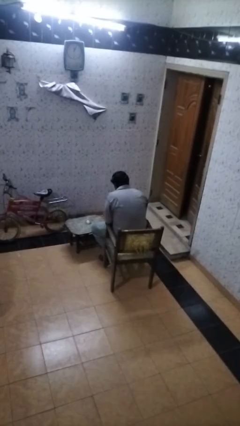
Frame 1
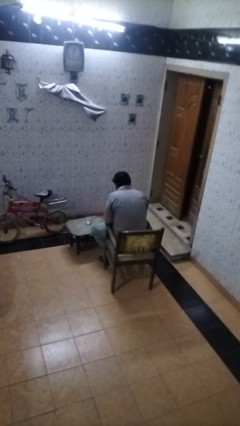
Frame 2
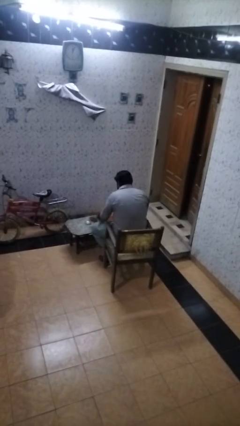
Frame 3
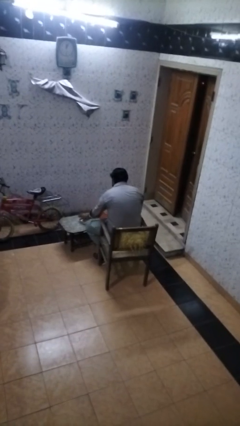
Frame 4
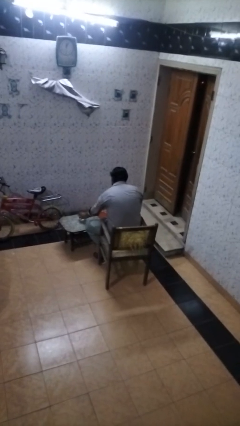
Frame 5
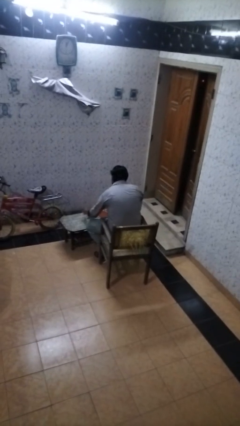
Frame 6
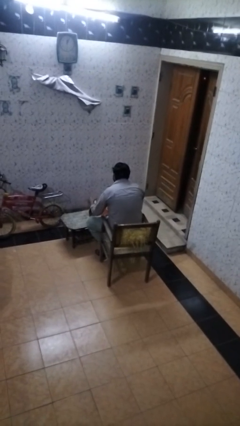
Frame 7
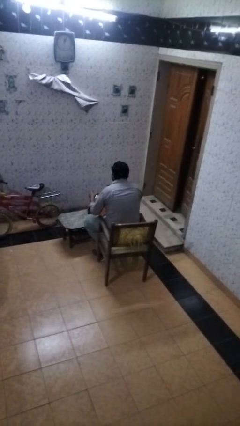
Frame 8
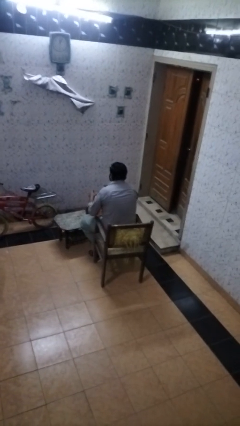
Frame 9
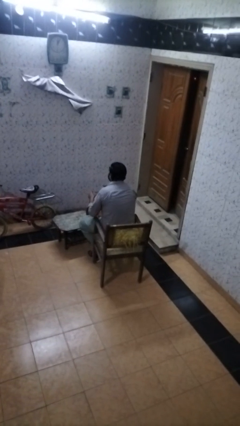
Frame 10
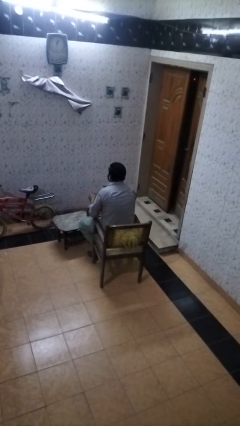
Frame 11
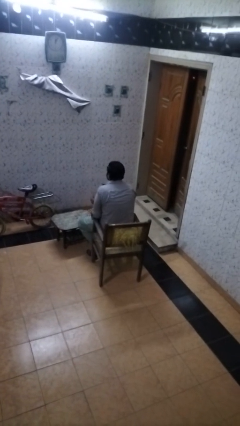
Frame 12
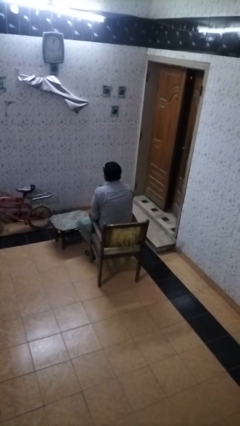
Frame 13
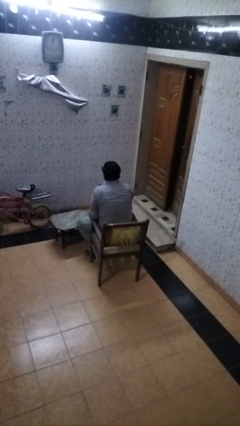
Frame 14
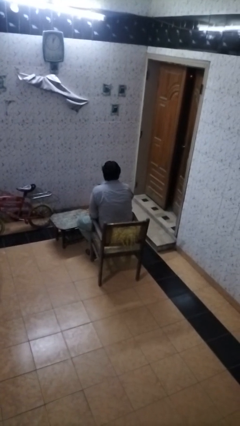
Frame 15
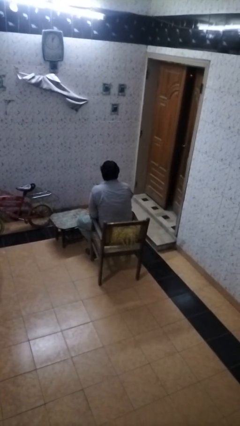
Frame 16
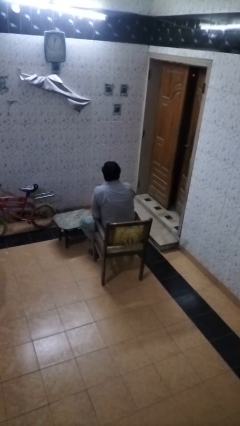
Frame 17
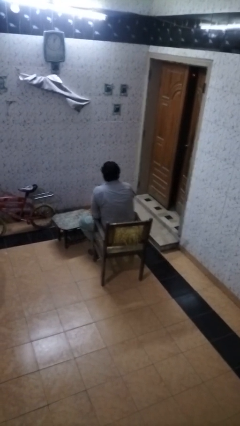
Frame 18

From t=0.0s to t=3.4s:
person picks up object from table

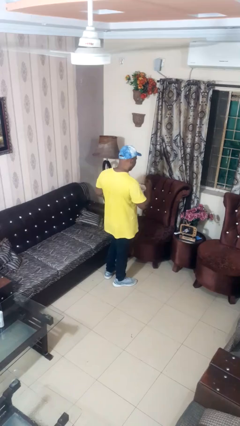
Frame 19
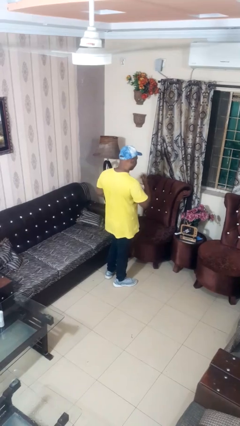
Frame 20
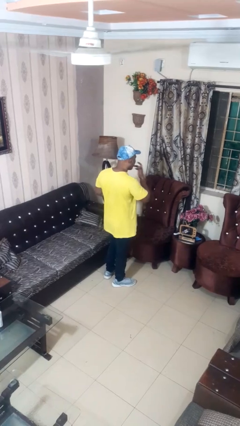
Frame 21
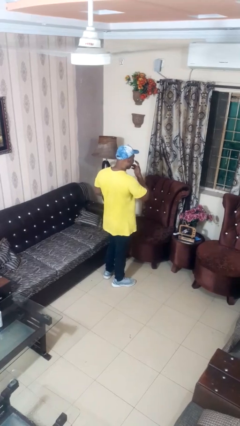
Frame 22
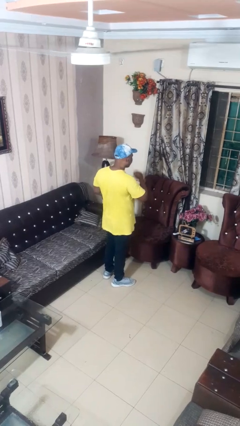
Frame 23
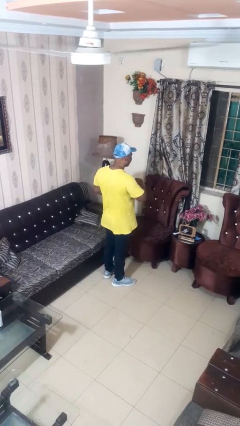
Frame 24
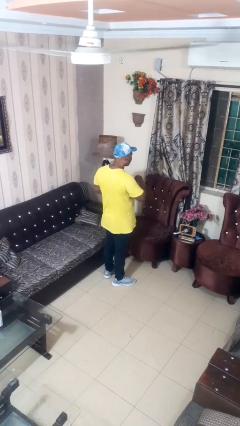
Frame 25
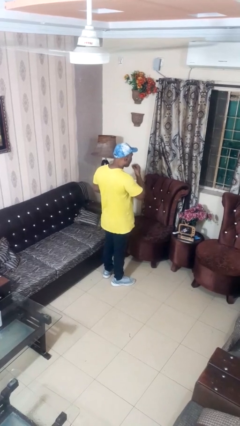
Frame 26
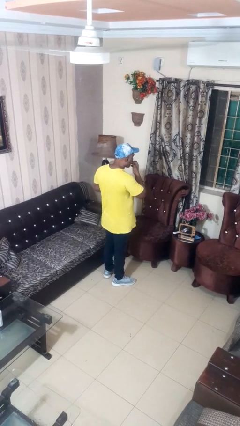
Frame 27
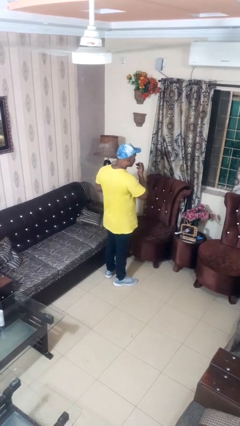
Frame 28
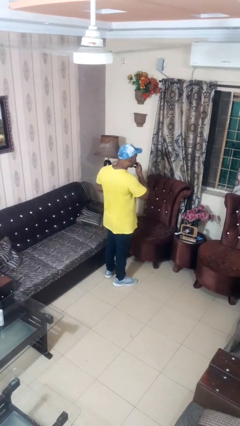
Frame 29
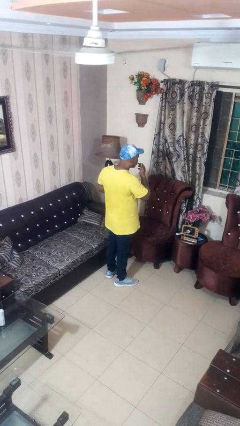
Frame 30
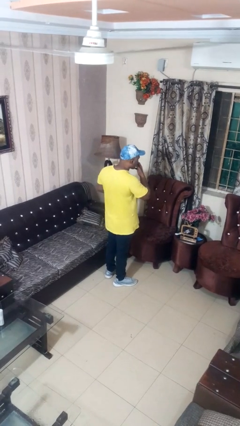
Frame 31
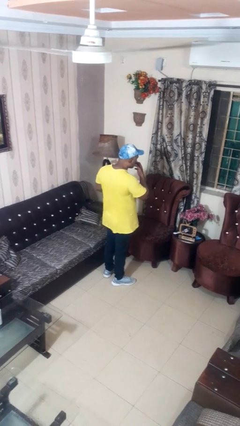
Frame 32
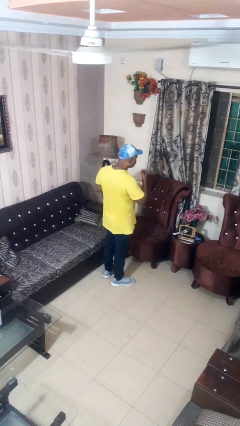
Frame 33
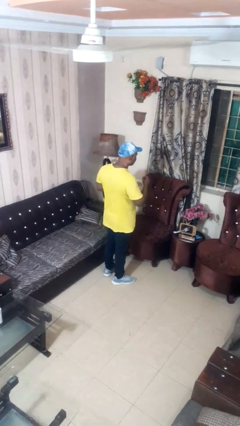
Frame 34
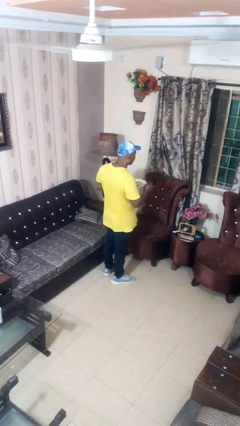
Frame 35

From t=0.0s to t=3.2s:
person licks fingers

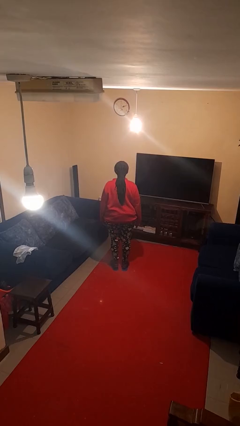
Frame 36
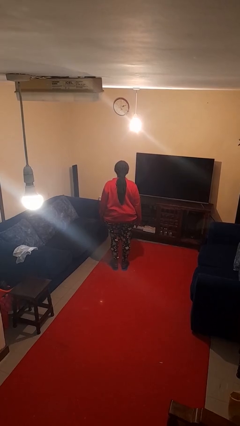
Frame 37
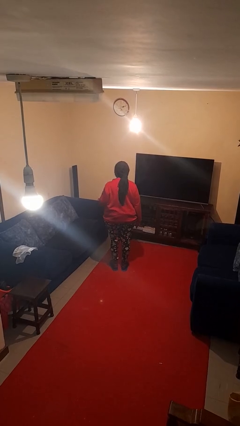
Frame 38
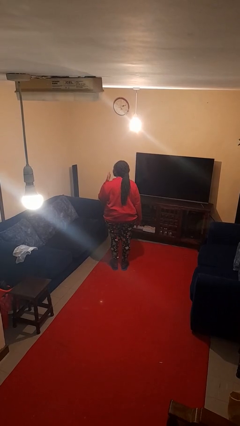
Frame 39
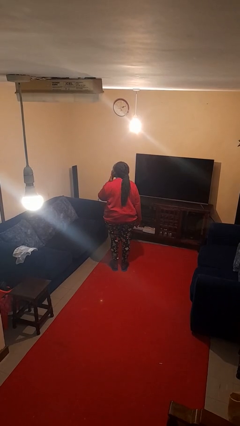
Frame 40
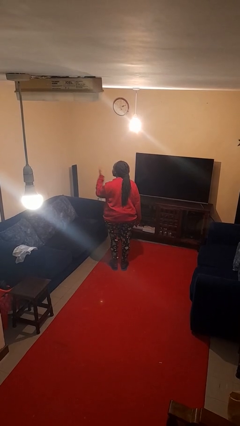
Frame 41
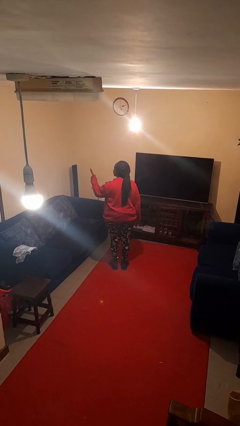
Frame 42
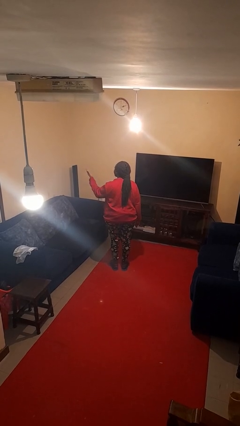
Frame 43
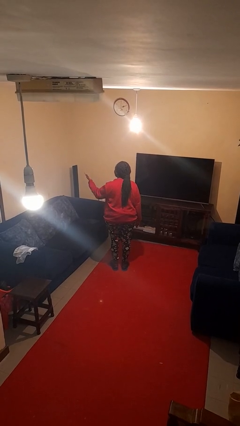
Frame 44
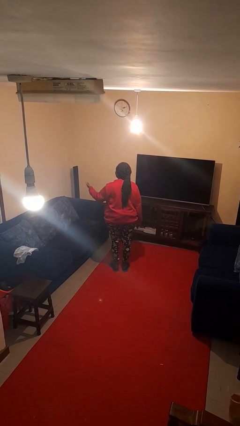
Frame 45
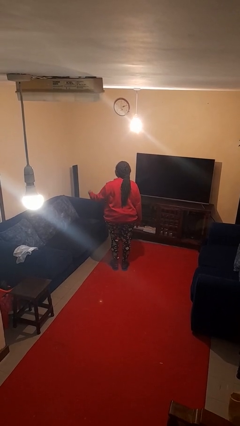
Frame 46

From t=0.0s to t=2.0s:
person gestures blow kiss

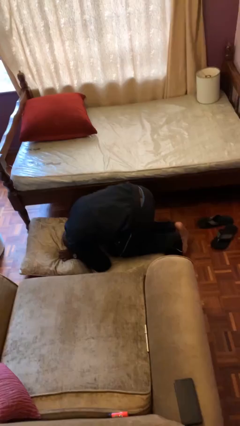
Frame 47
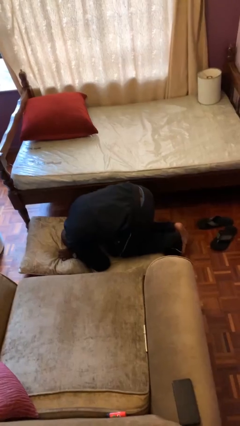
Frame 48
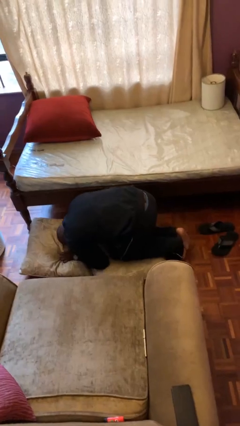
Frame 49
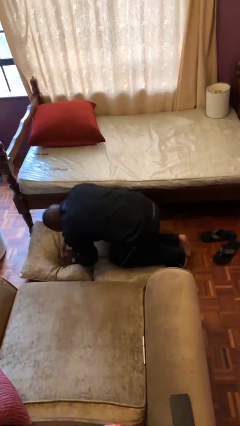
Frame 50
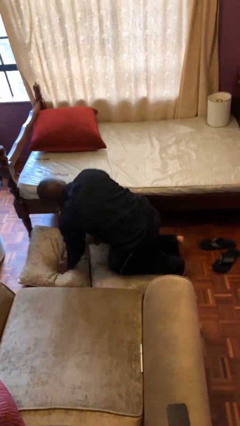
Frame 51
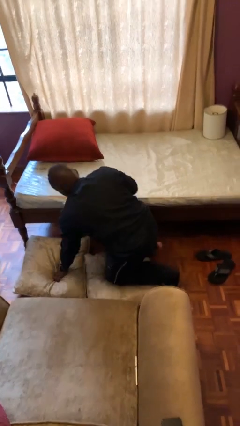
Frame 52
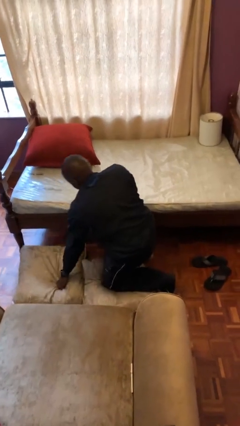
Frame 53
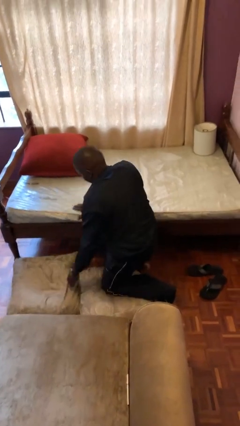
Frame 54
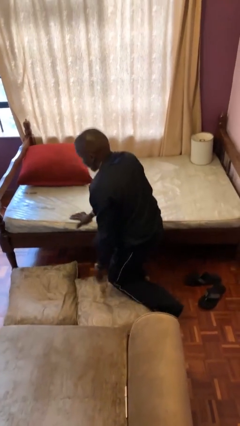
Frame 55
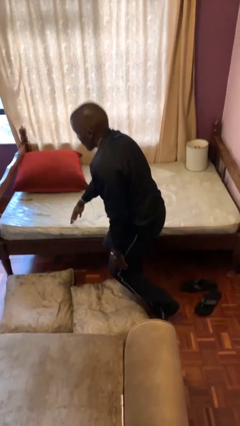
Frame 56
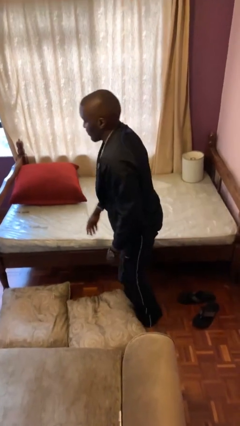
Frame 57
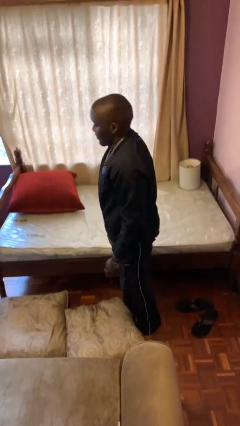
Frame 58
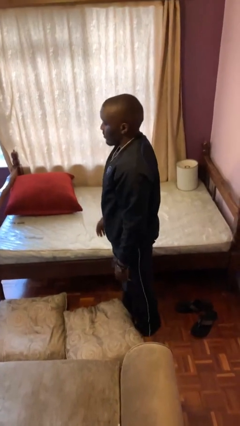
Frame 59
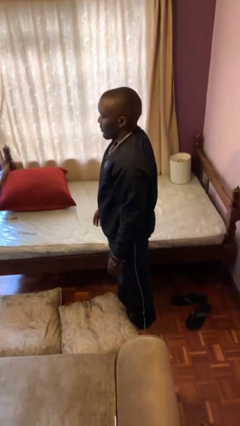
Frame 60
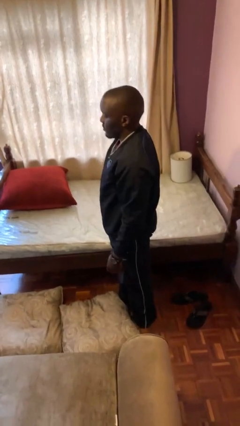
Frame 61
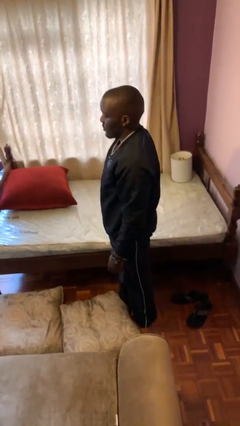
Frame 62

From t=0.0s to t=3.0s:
person stands up from floor

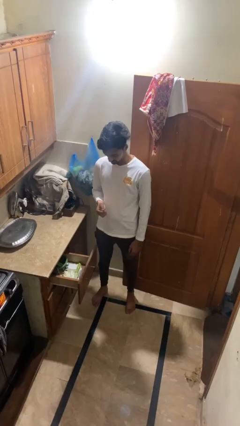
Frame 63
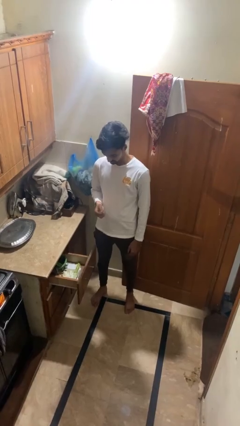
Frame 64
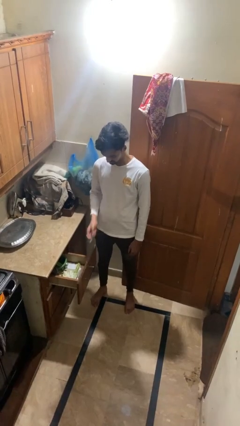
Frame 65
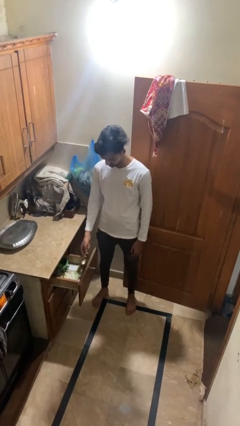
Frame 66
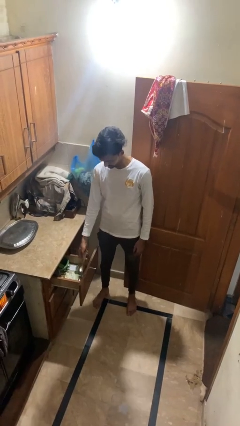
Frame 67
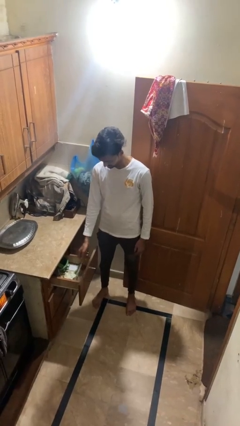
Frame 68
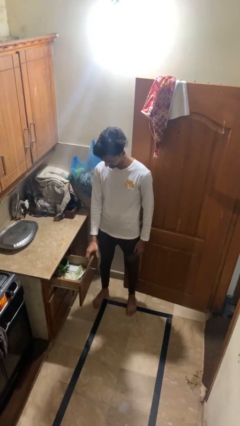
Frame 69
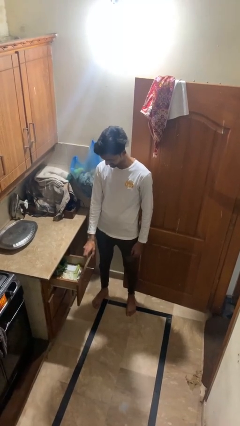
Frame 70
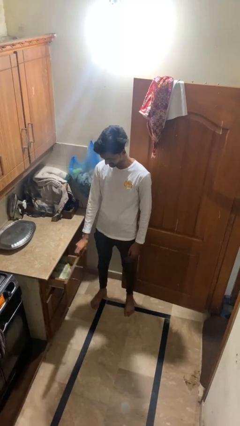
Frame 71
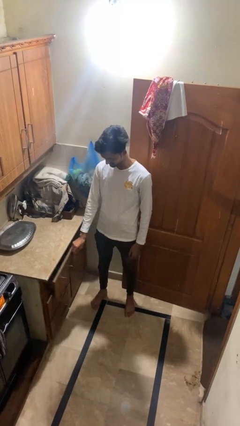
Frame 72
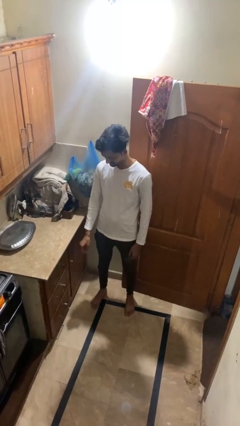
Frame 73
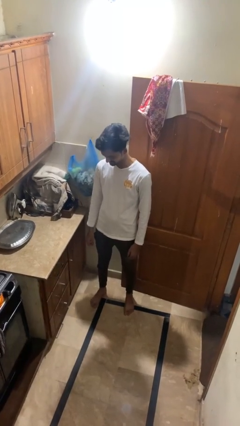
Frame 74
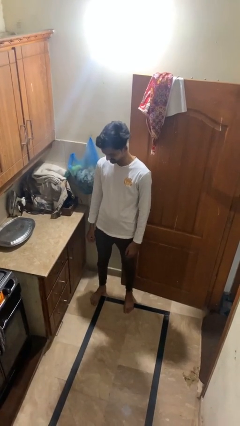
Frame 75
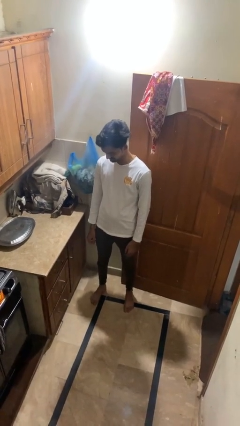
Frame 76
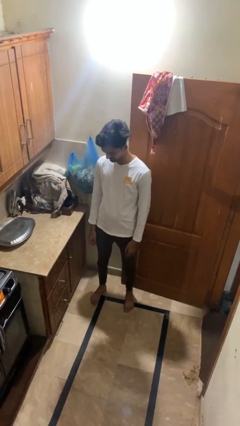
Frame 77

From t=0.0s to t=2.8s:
person puts object into kitchen drawer

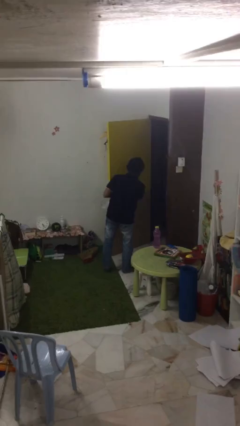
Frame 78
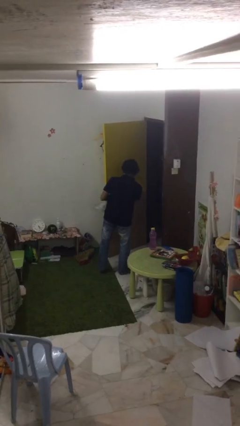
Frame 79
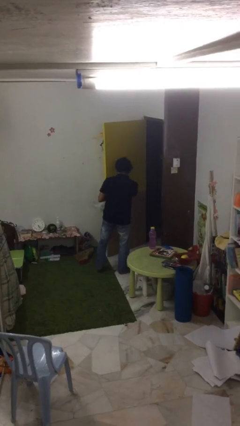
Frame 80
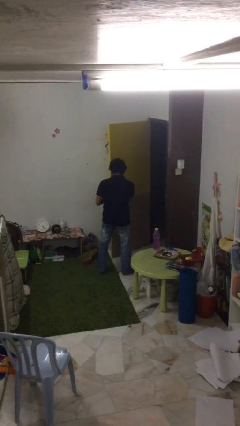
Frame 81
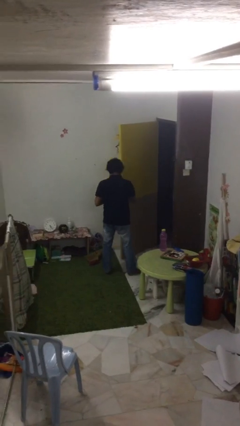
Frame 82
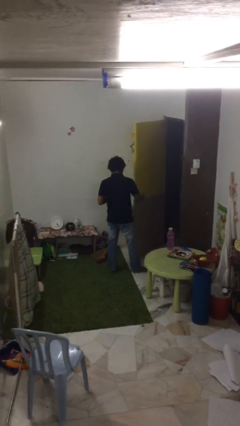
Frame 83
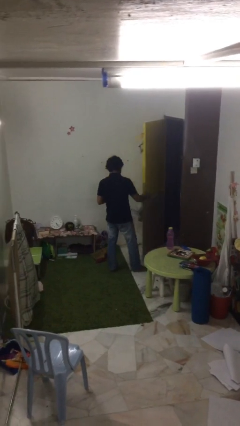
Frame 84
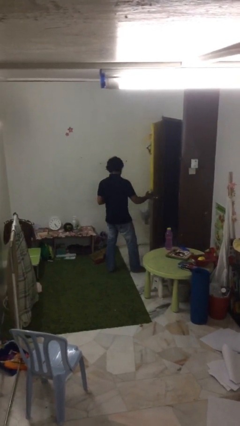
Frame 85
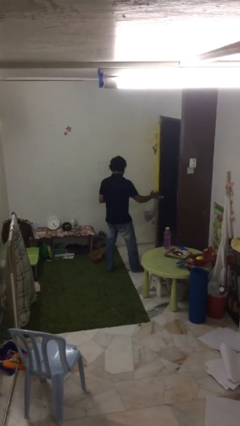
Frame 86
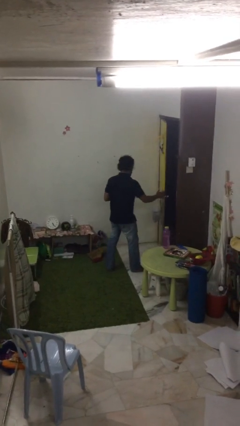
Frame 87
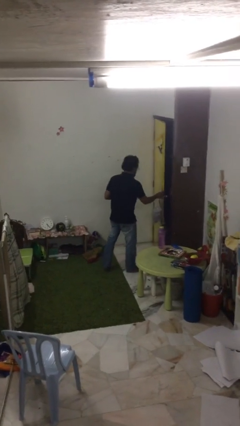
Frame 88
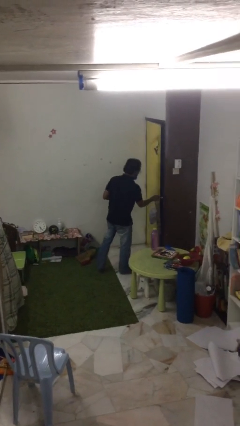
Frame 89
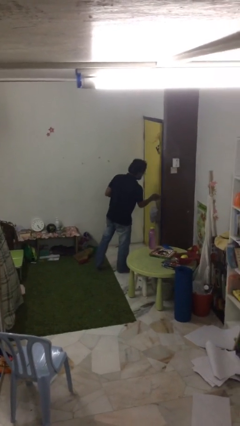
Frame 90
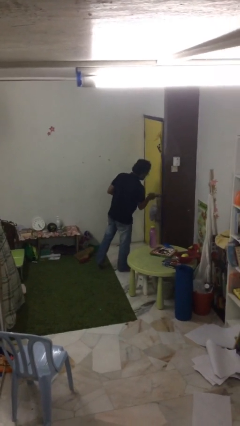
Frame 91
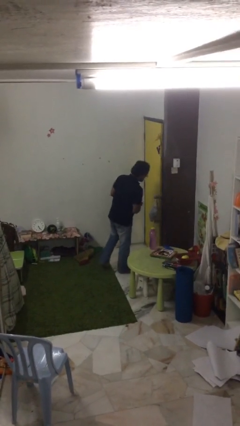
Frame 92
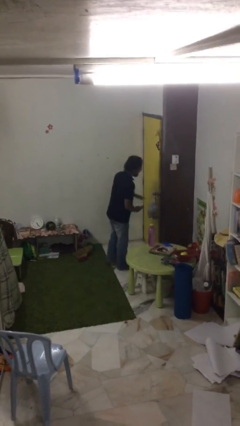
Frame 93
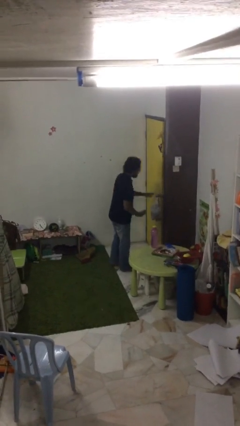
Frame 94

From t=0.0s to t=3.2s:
person closes facility door
